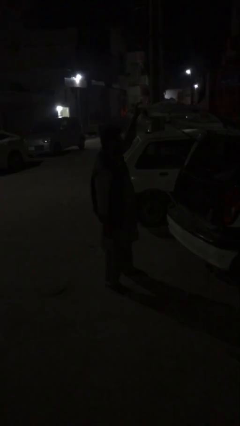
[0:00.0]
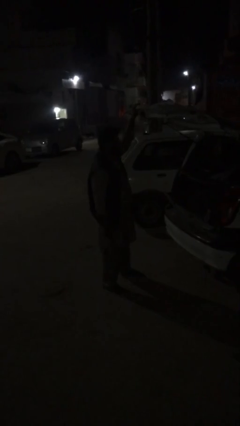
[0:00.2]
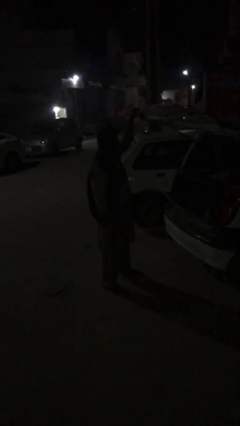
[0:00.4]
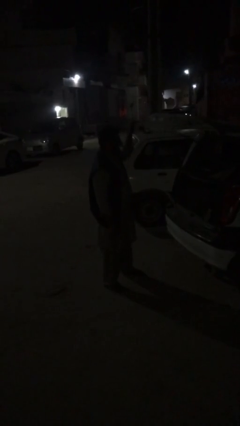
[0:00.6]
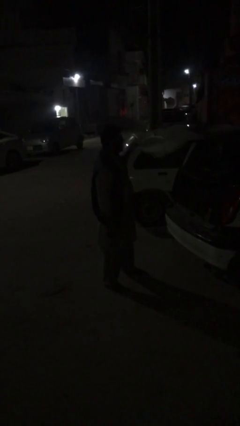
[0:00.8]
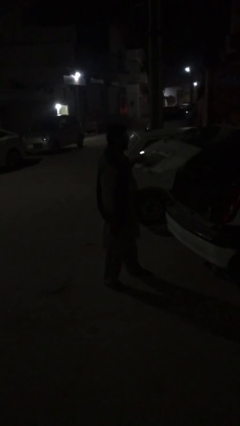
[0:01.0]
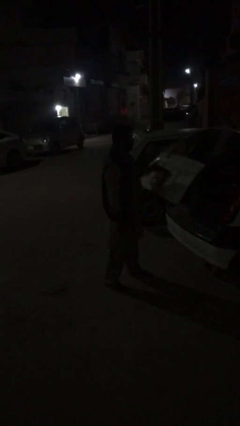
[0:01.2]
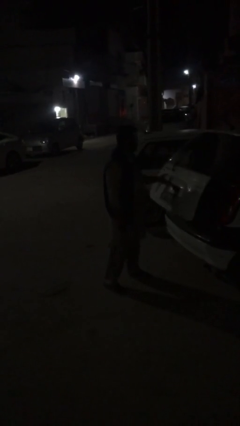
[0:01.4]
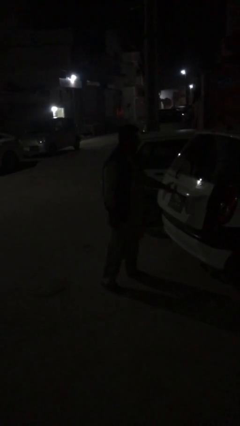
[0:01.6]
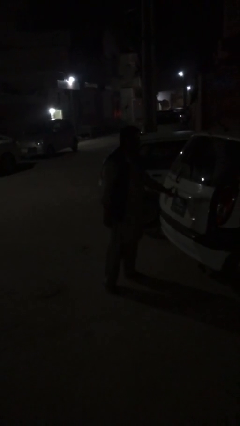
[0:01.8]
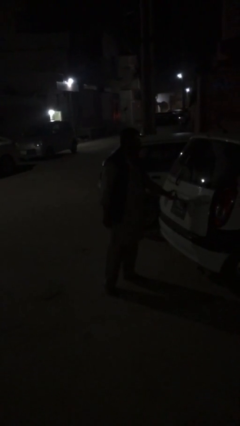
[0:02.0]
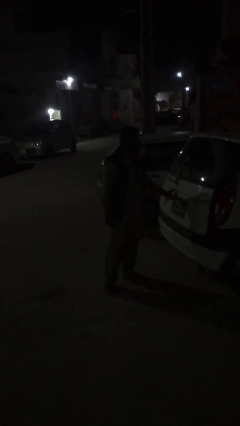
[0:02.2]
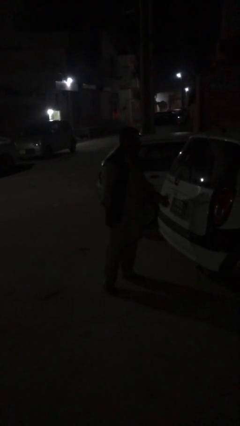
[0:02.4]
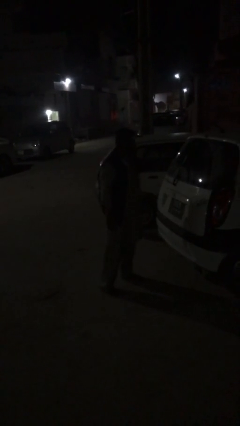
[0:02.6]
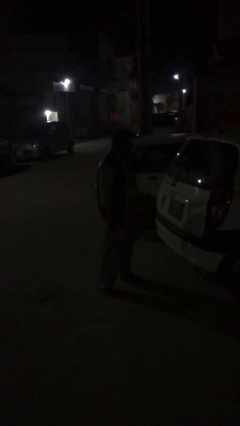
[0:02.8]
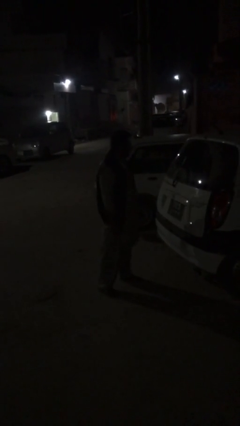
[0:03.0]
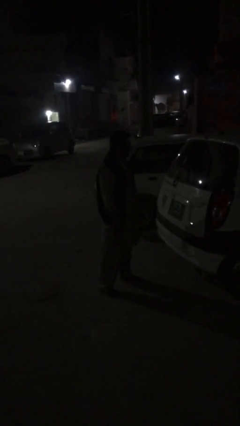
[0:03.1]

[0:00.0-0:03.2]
person closes car trunk

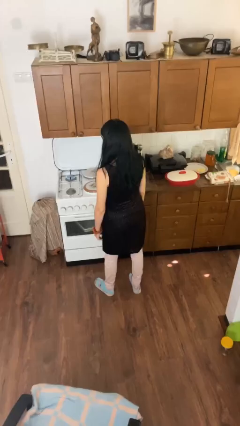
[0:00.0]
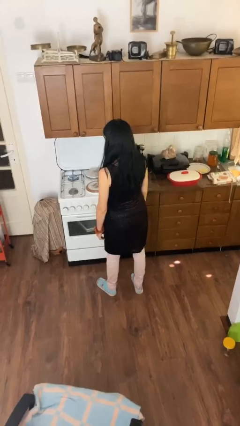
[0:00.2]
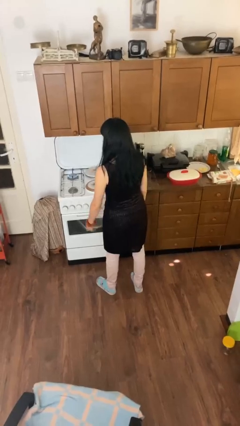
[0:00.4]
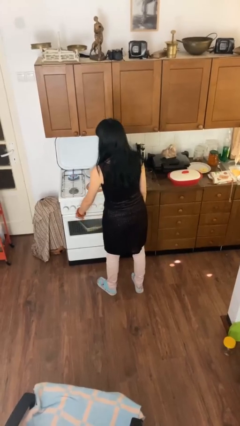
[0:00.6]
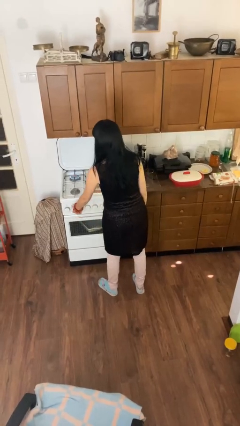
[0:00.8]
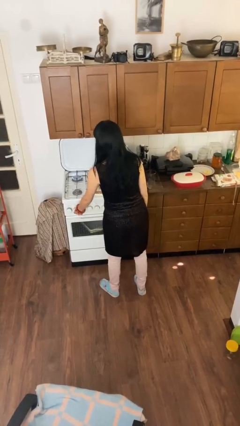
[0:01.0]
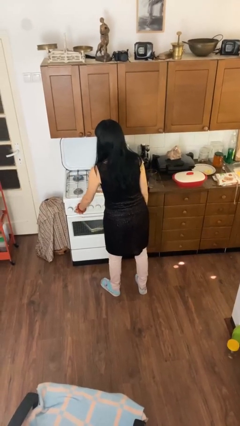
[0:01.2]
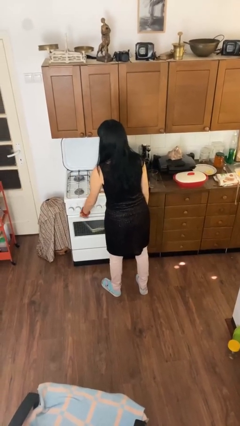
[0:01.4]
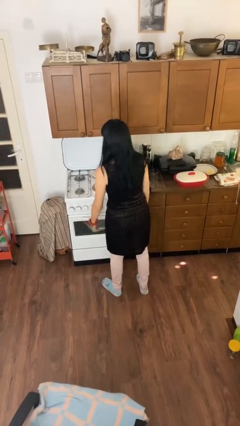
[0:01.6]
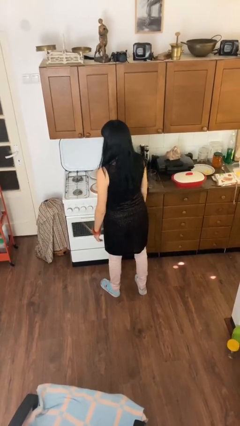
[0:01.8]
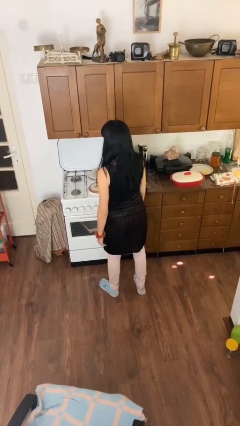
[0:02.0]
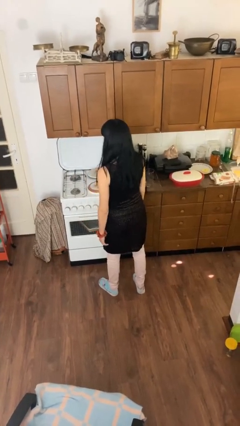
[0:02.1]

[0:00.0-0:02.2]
person turns off stovetop

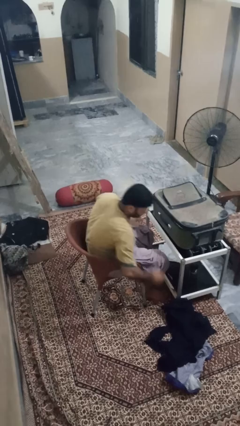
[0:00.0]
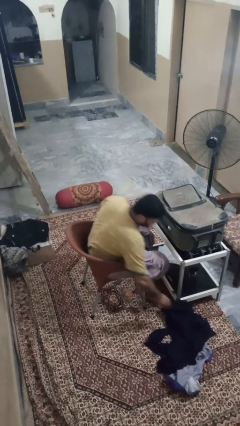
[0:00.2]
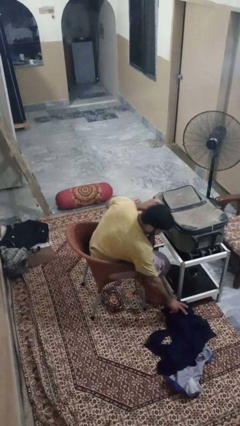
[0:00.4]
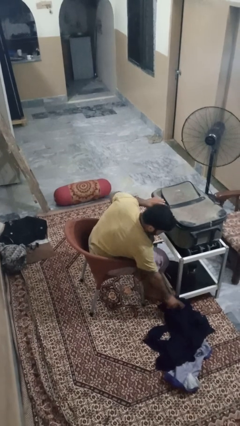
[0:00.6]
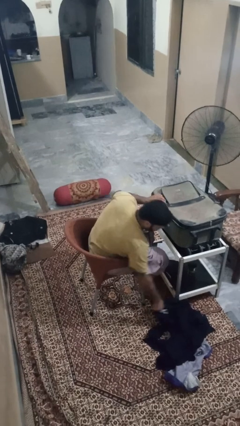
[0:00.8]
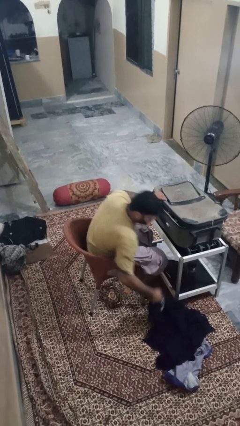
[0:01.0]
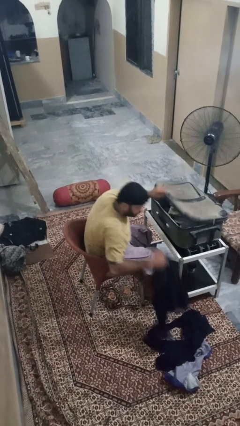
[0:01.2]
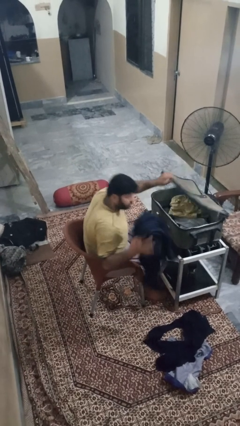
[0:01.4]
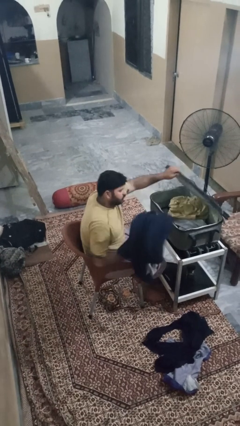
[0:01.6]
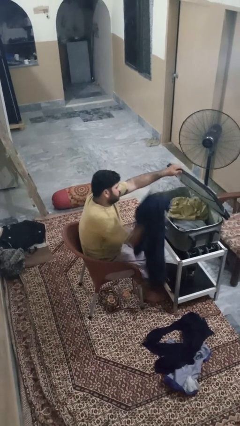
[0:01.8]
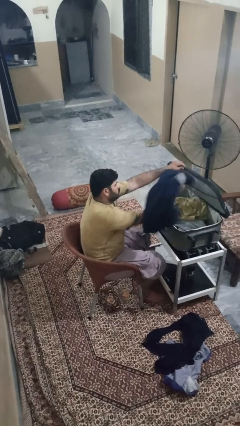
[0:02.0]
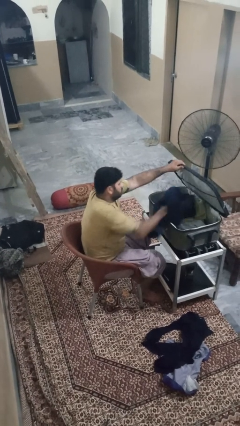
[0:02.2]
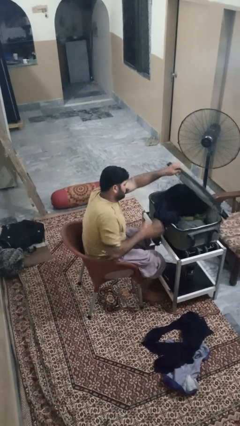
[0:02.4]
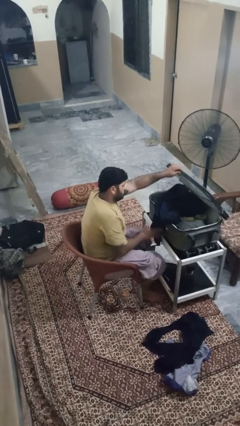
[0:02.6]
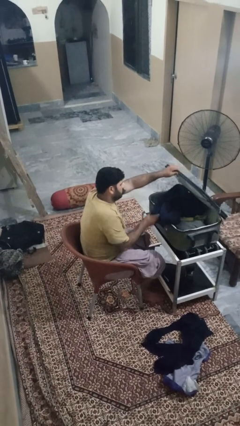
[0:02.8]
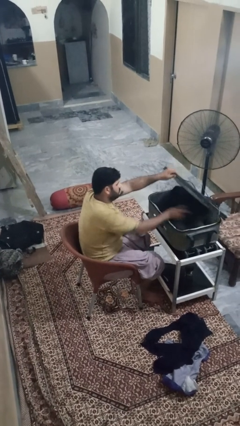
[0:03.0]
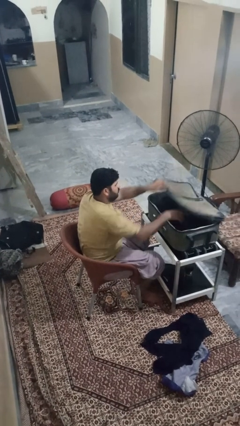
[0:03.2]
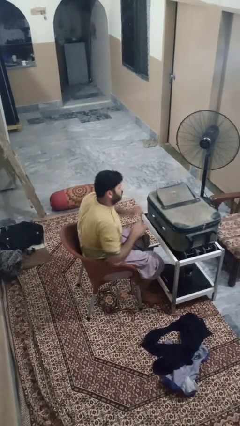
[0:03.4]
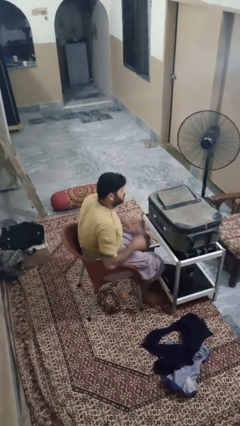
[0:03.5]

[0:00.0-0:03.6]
person loads clothes into suitcase

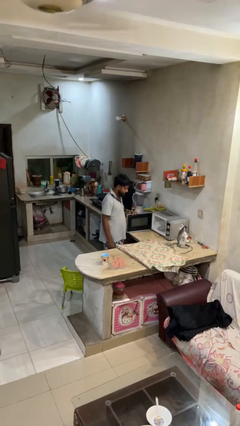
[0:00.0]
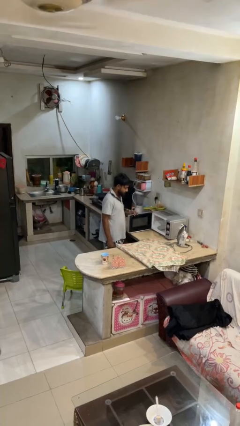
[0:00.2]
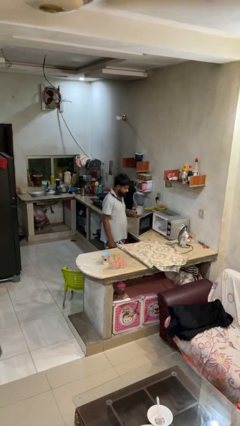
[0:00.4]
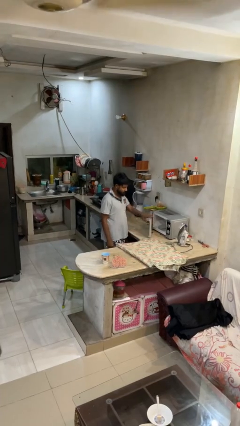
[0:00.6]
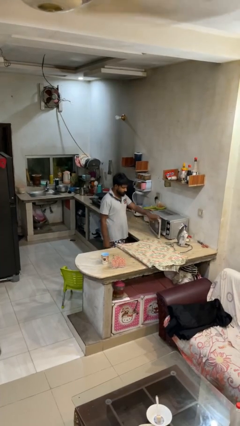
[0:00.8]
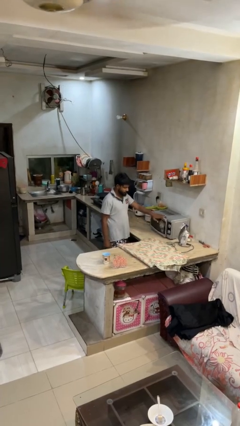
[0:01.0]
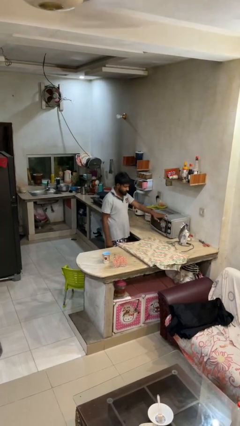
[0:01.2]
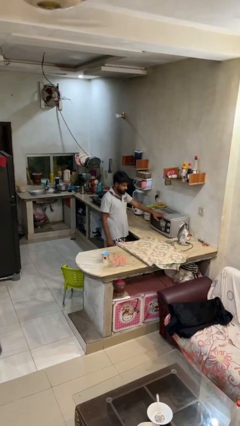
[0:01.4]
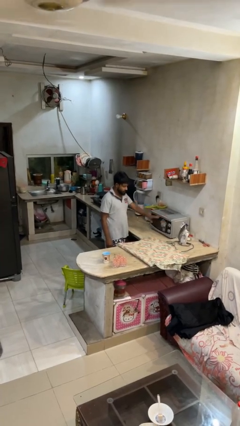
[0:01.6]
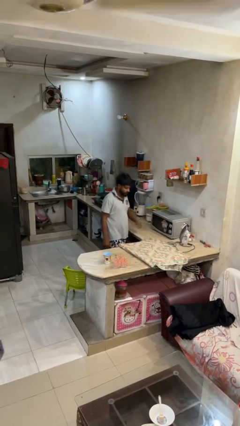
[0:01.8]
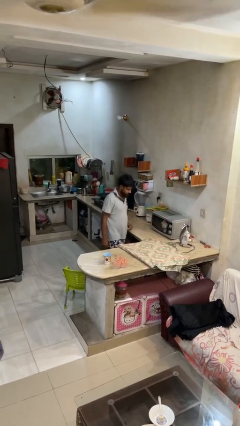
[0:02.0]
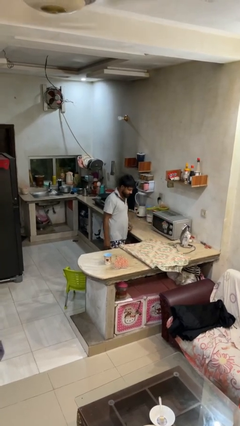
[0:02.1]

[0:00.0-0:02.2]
person closes microwave

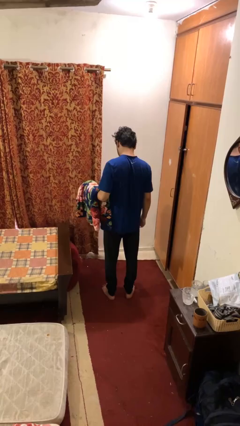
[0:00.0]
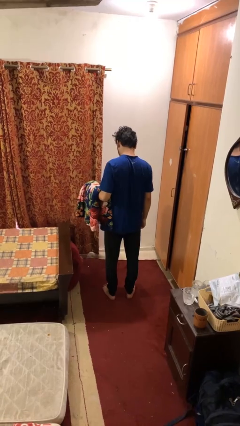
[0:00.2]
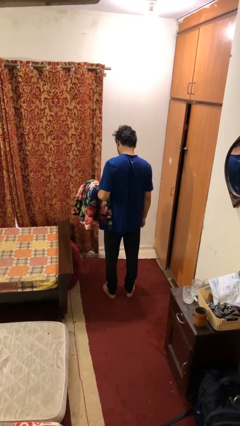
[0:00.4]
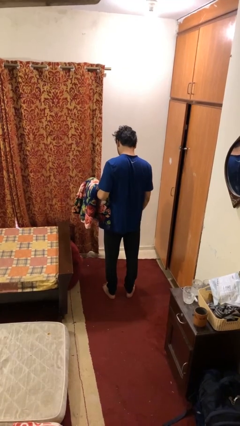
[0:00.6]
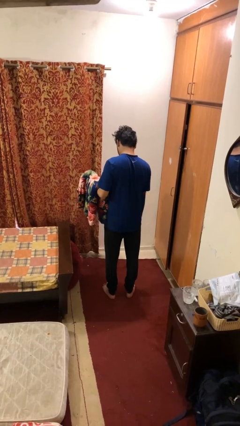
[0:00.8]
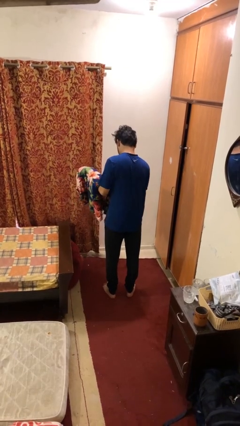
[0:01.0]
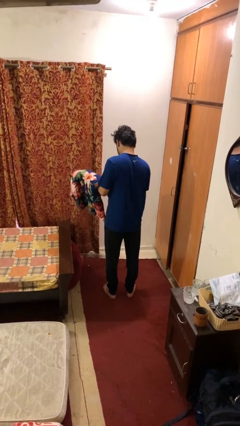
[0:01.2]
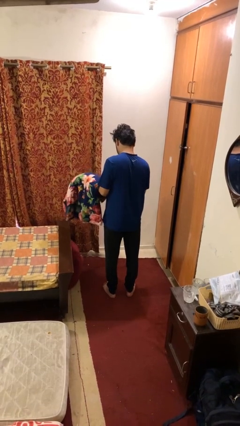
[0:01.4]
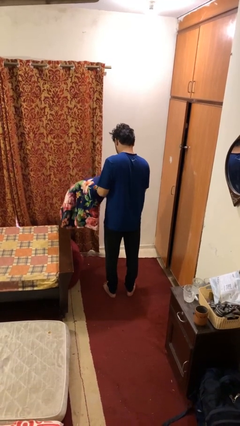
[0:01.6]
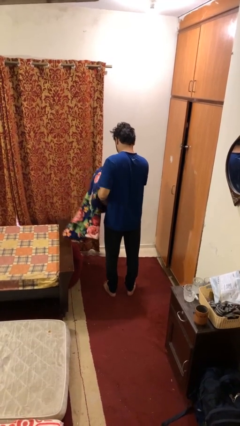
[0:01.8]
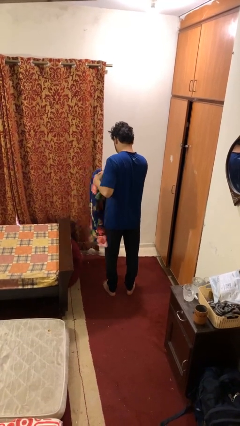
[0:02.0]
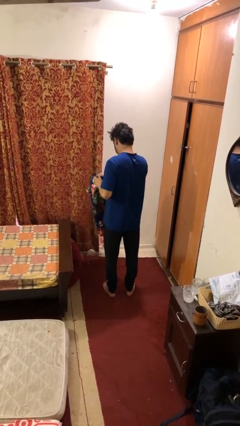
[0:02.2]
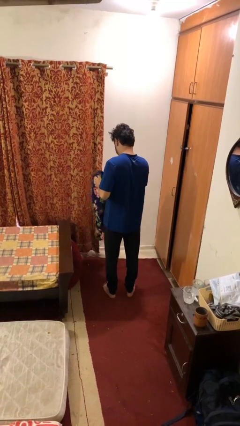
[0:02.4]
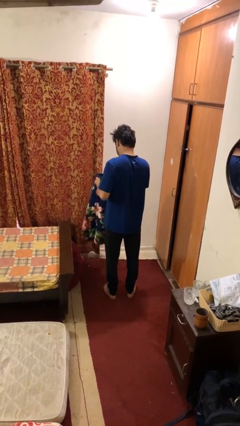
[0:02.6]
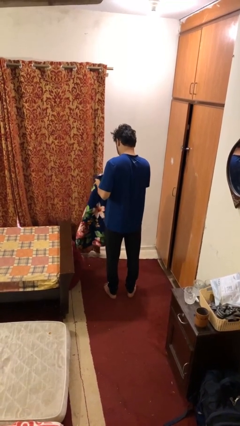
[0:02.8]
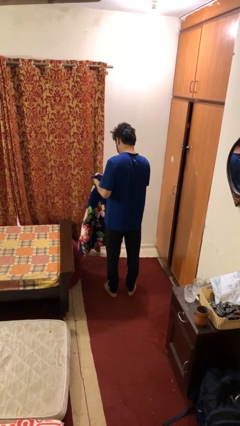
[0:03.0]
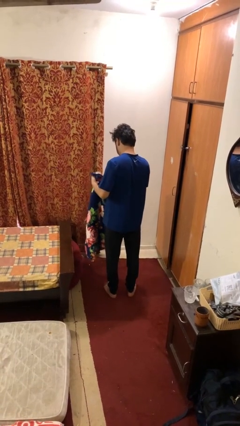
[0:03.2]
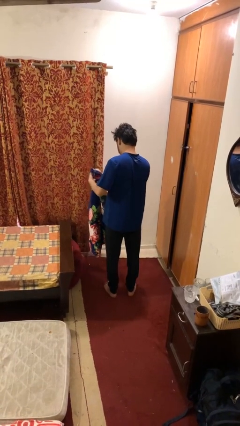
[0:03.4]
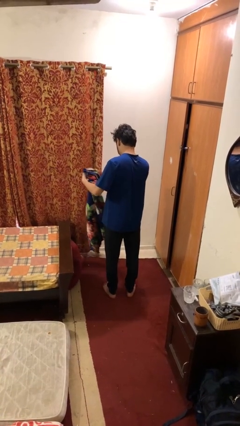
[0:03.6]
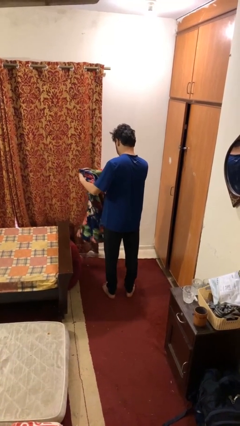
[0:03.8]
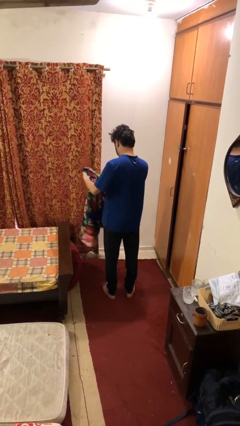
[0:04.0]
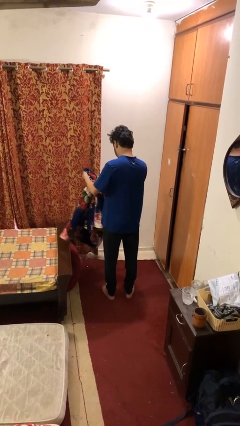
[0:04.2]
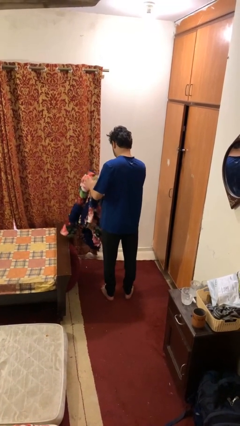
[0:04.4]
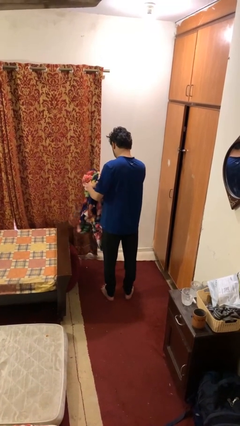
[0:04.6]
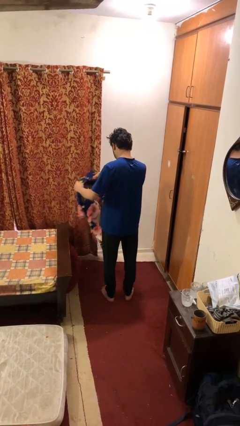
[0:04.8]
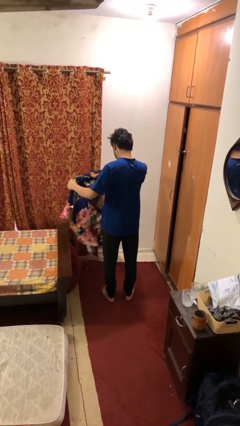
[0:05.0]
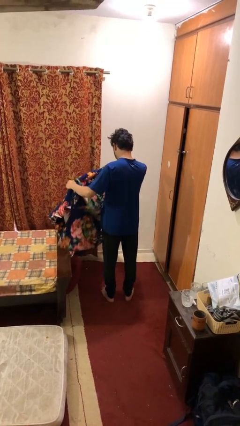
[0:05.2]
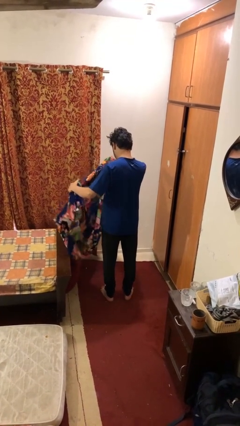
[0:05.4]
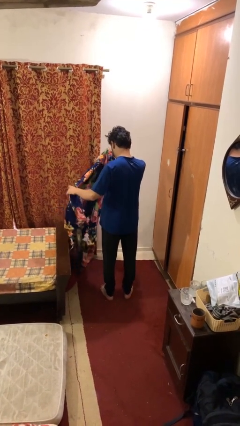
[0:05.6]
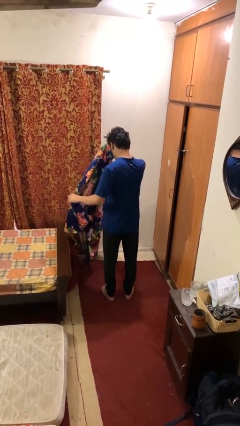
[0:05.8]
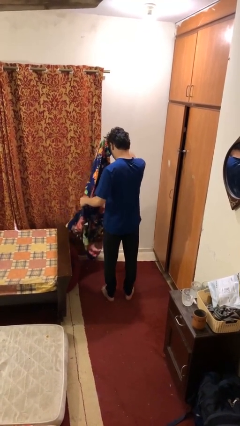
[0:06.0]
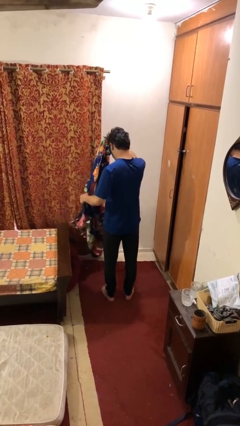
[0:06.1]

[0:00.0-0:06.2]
person unfolds blanket

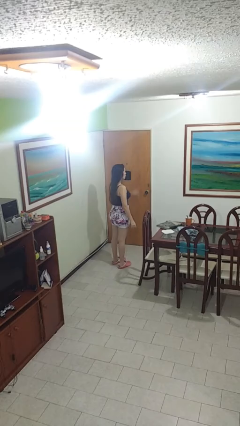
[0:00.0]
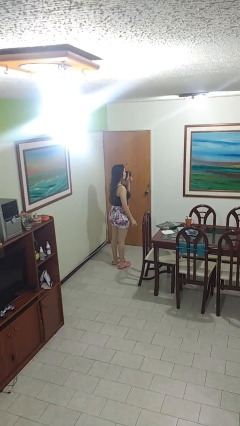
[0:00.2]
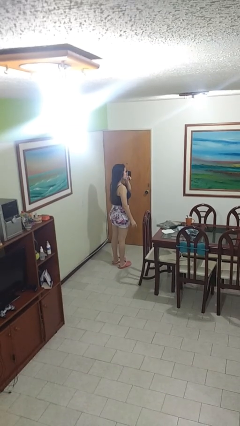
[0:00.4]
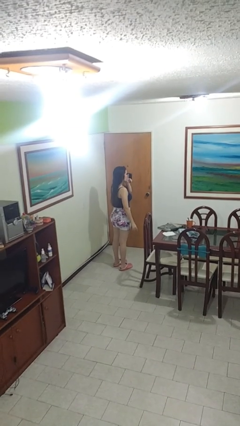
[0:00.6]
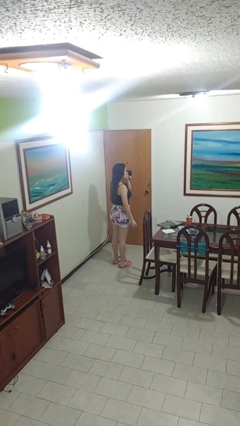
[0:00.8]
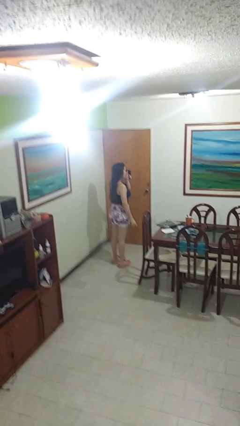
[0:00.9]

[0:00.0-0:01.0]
person gestures be quiet
